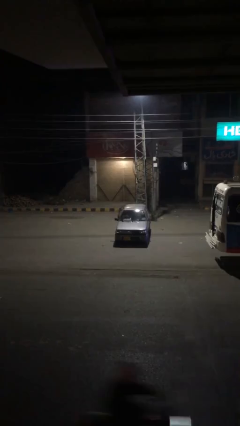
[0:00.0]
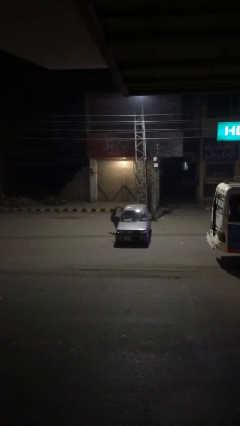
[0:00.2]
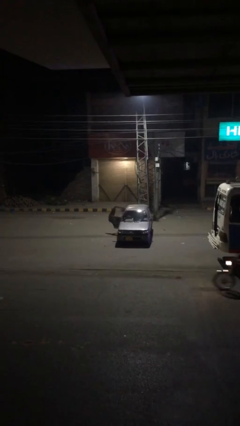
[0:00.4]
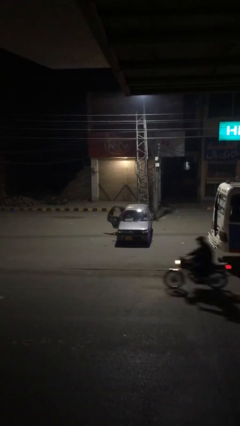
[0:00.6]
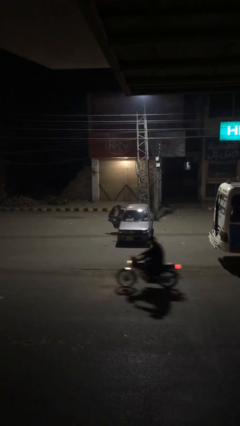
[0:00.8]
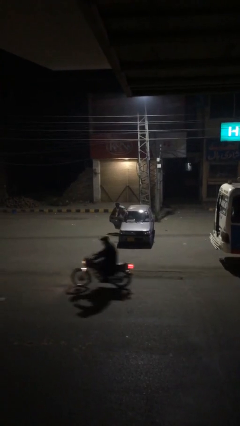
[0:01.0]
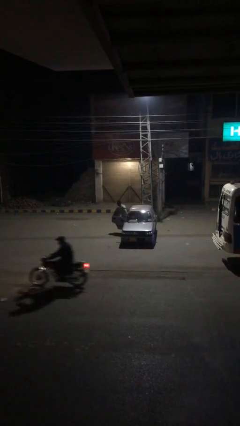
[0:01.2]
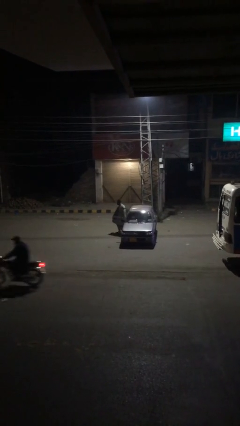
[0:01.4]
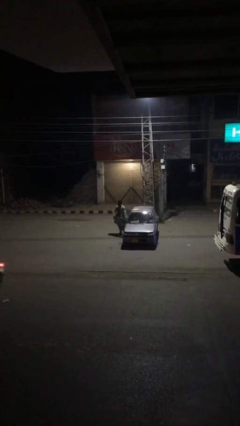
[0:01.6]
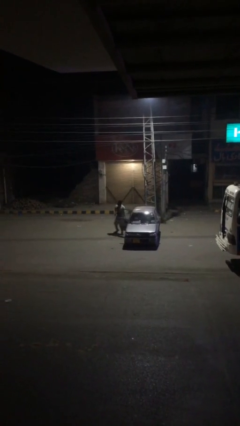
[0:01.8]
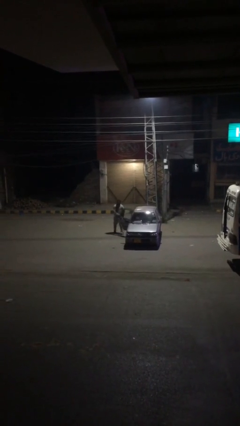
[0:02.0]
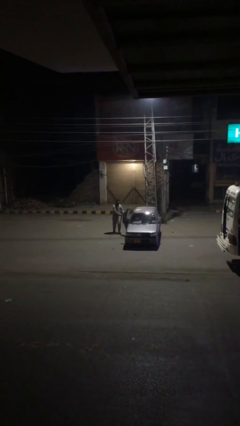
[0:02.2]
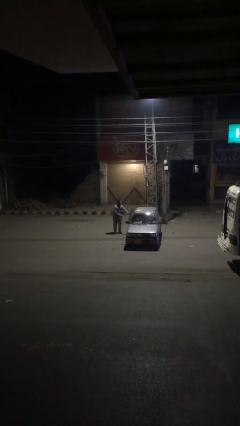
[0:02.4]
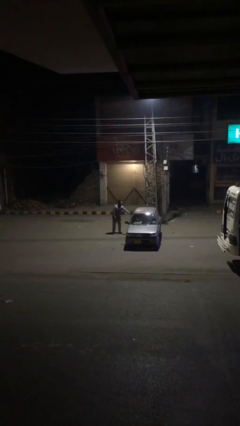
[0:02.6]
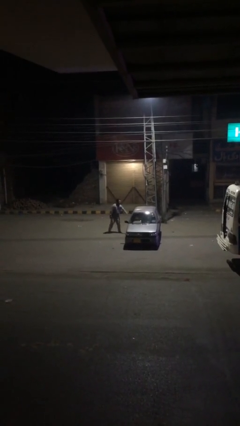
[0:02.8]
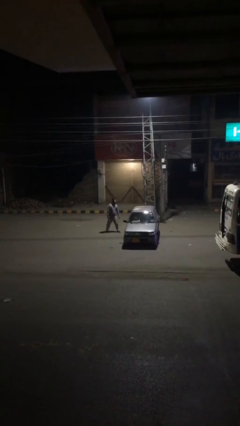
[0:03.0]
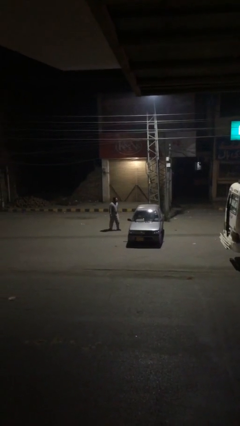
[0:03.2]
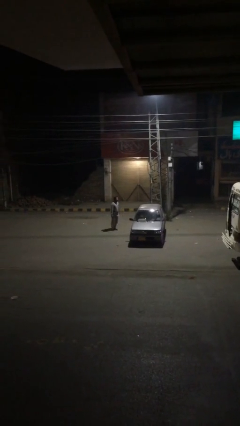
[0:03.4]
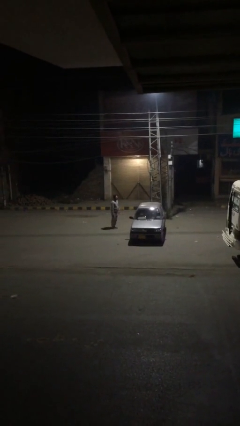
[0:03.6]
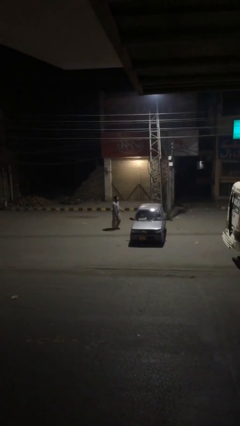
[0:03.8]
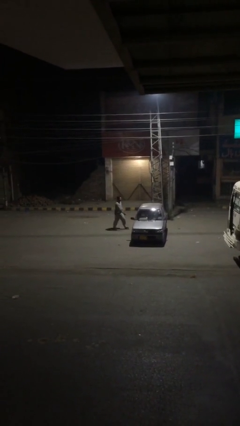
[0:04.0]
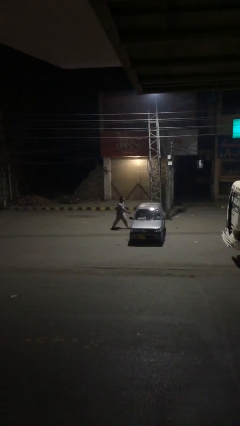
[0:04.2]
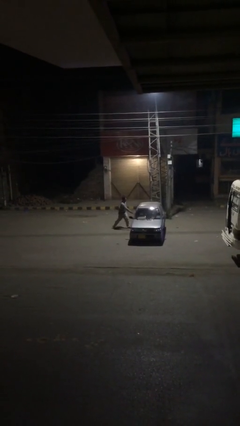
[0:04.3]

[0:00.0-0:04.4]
car drops off person

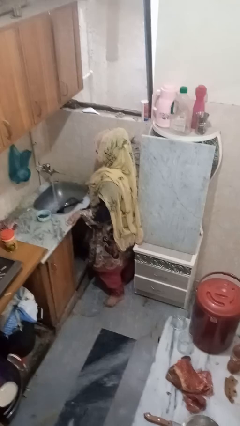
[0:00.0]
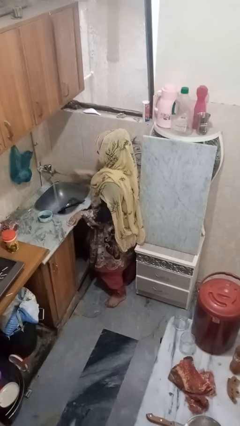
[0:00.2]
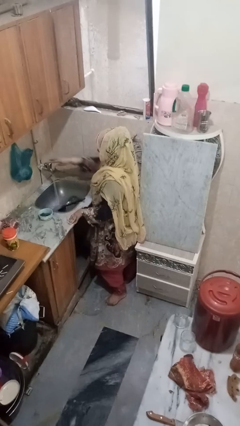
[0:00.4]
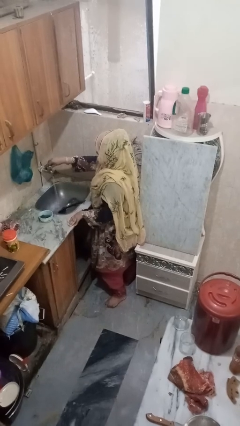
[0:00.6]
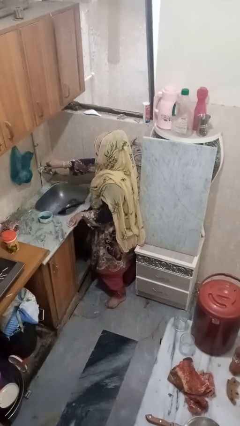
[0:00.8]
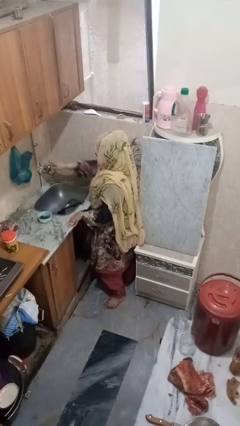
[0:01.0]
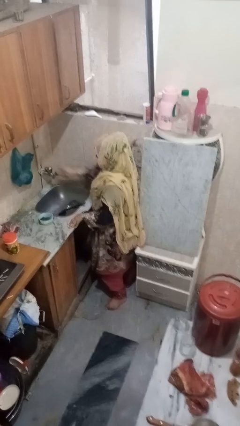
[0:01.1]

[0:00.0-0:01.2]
person turns off faucet

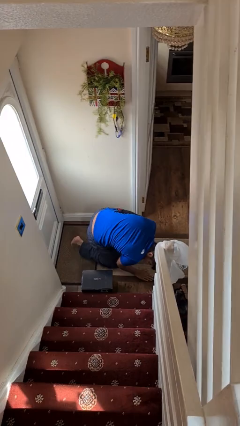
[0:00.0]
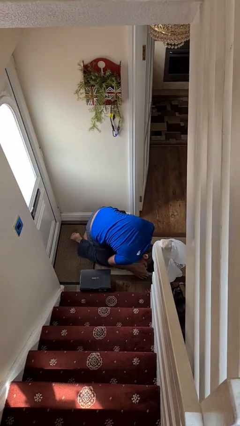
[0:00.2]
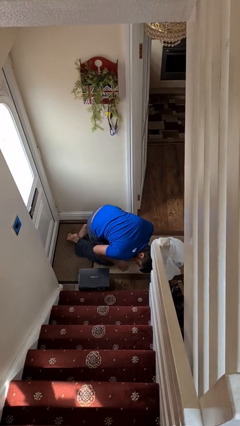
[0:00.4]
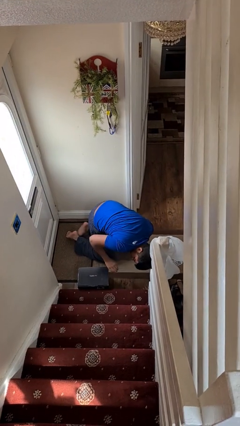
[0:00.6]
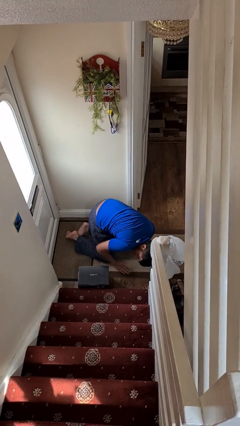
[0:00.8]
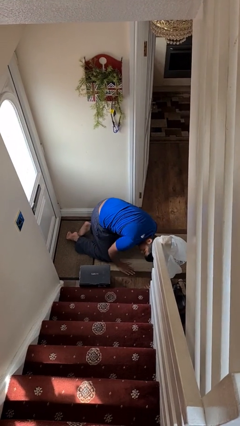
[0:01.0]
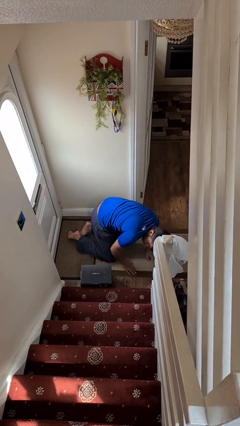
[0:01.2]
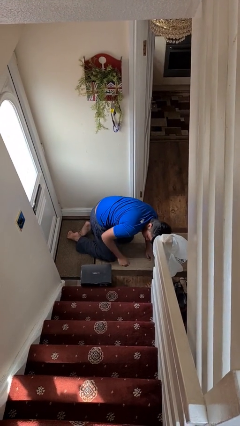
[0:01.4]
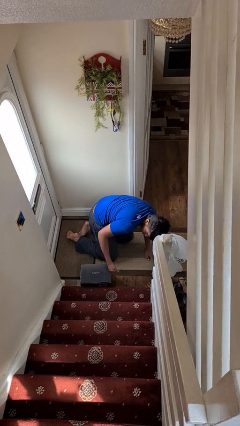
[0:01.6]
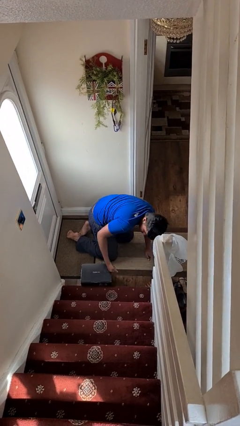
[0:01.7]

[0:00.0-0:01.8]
person lies down on floor

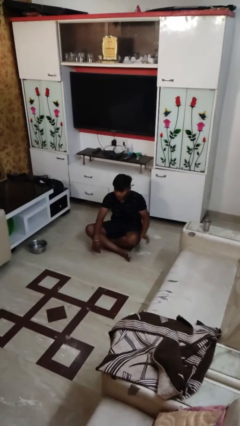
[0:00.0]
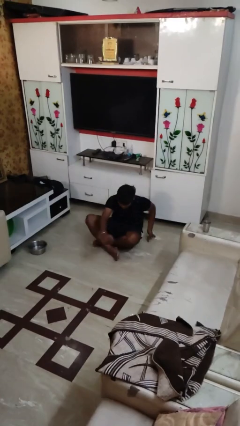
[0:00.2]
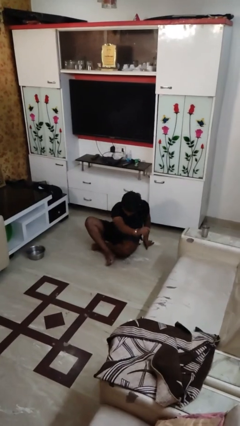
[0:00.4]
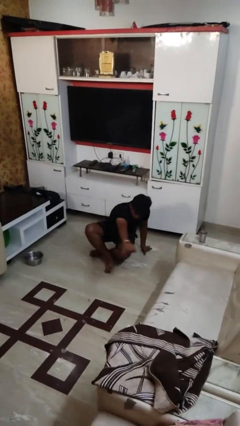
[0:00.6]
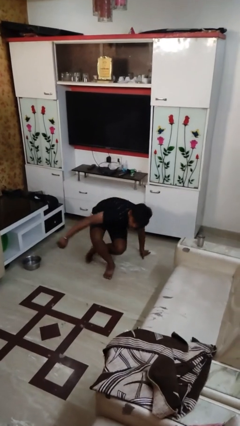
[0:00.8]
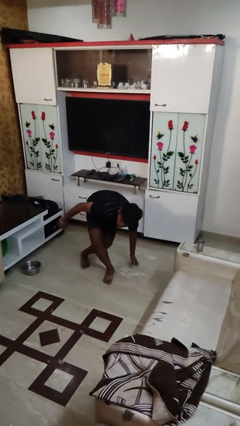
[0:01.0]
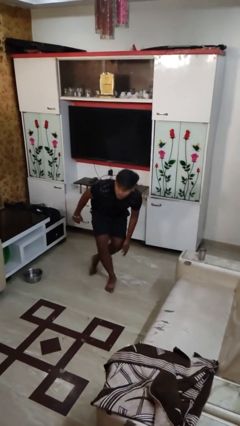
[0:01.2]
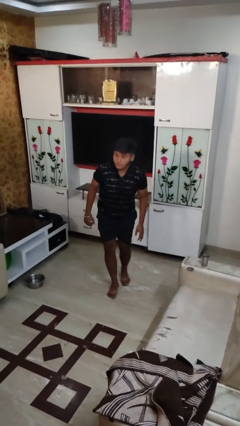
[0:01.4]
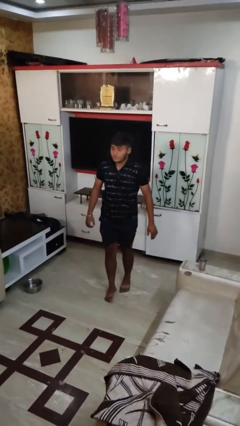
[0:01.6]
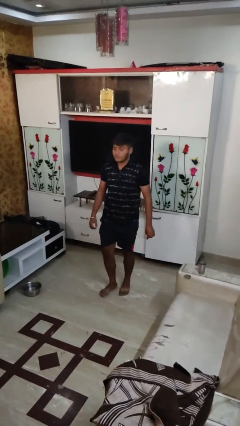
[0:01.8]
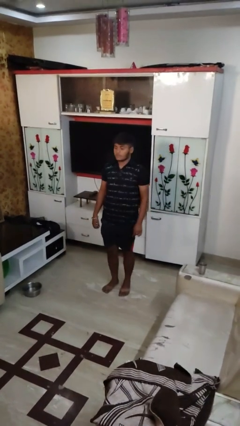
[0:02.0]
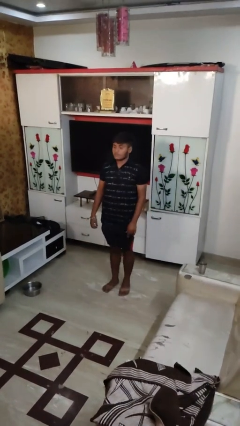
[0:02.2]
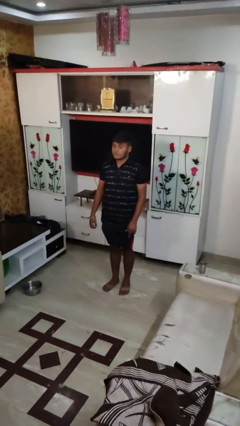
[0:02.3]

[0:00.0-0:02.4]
person stands up from floor

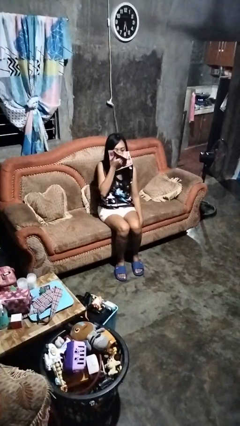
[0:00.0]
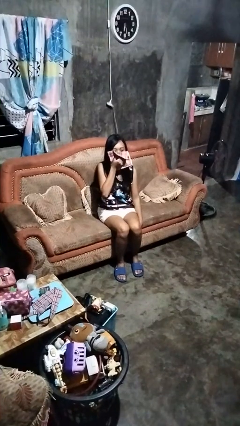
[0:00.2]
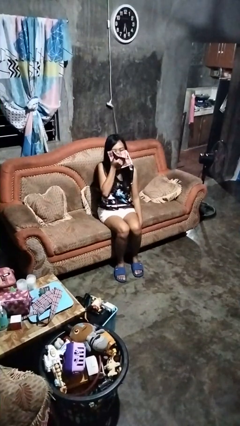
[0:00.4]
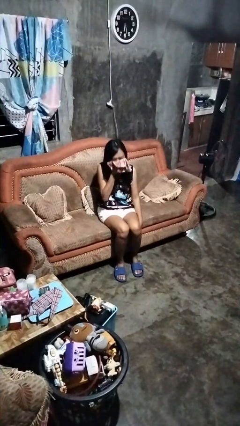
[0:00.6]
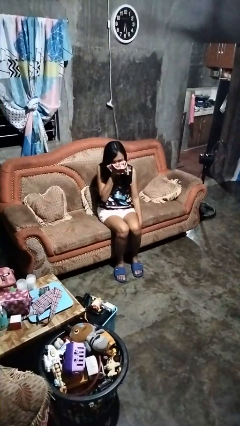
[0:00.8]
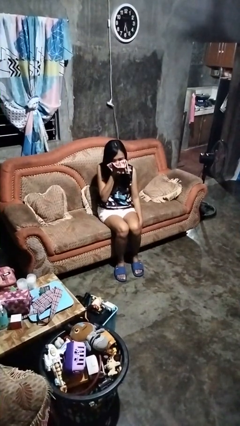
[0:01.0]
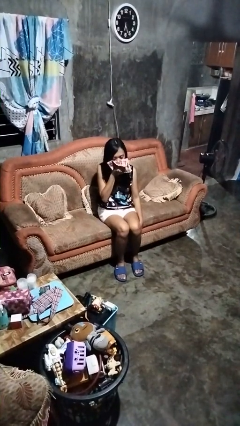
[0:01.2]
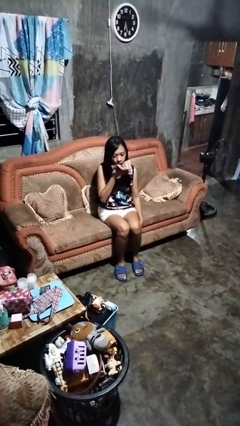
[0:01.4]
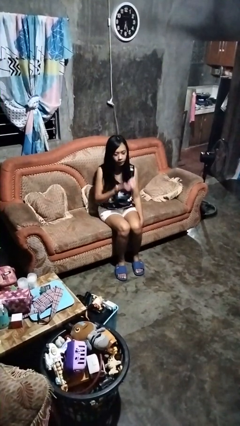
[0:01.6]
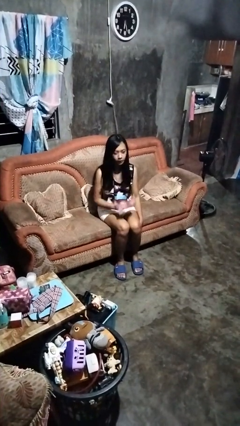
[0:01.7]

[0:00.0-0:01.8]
person blows nose

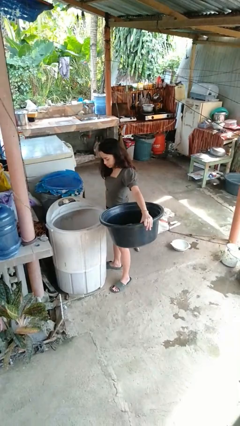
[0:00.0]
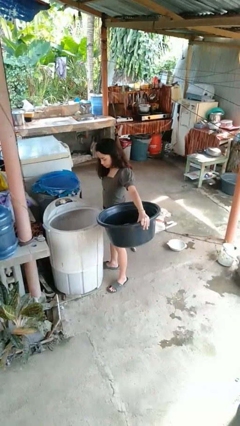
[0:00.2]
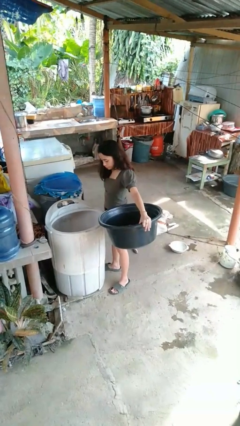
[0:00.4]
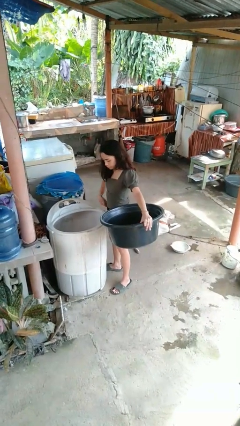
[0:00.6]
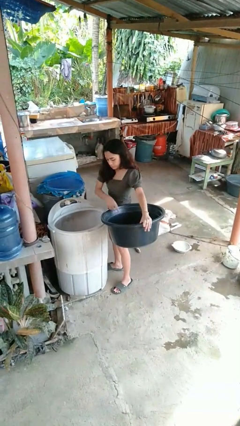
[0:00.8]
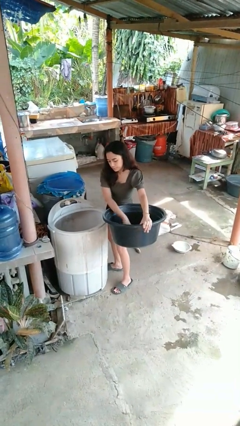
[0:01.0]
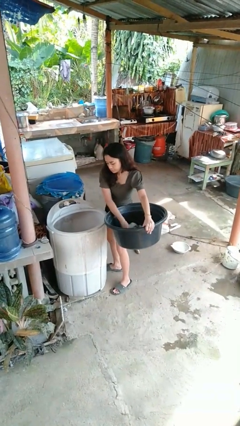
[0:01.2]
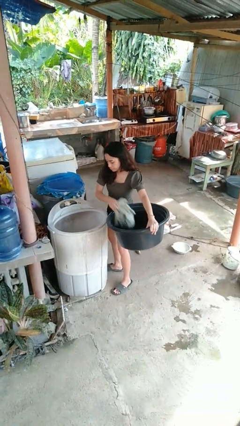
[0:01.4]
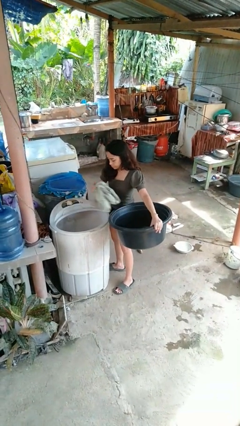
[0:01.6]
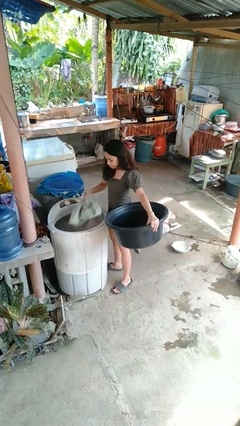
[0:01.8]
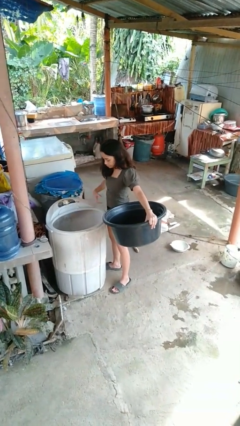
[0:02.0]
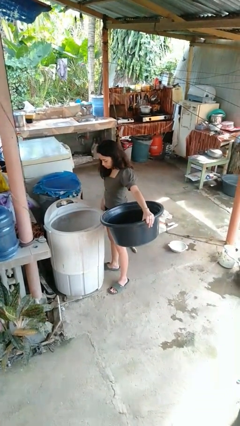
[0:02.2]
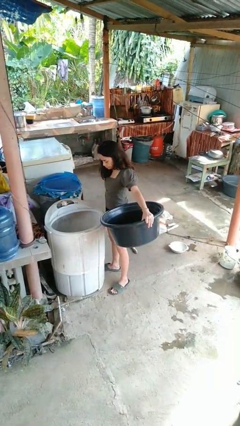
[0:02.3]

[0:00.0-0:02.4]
person loads clotheswasher

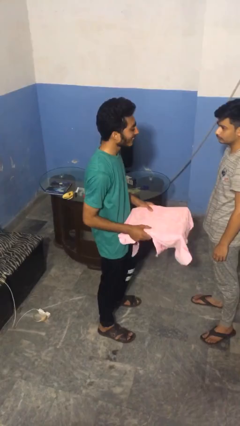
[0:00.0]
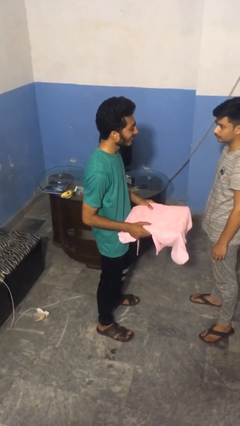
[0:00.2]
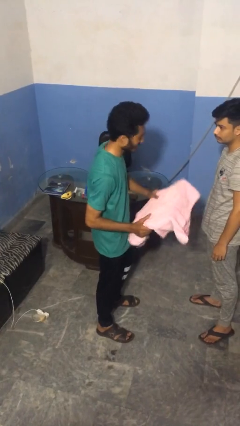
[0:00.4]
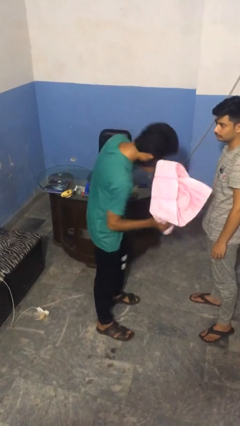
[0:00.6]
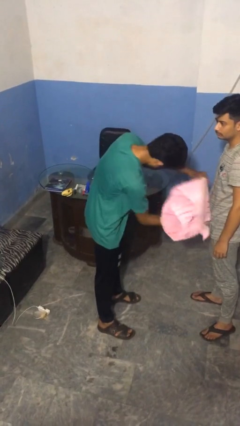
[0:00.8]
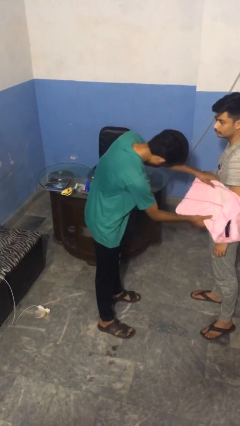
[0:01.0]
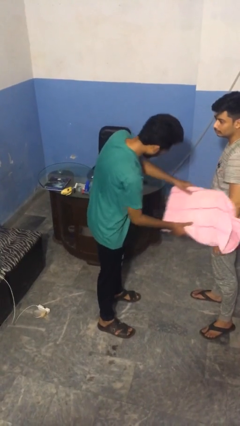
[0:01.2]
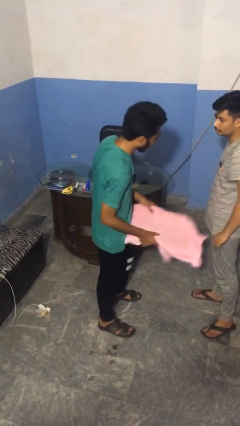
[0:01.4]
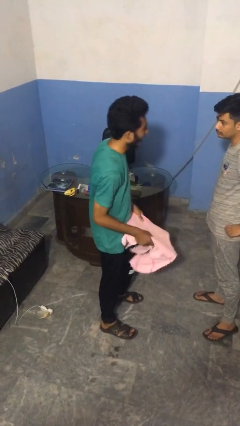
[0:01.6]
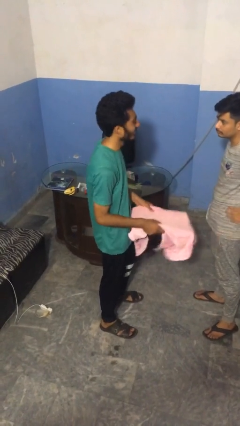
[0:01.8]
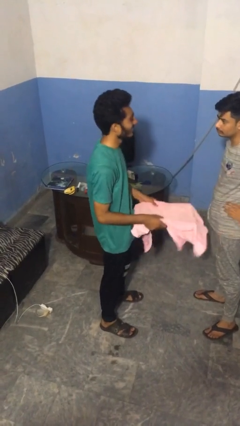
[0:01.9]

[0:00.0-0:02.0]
person hits person with pillow

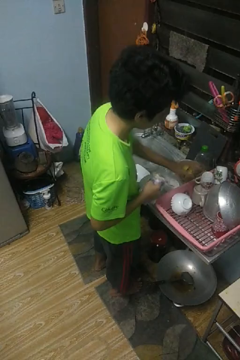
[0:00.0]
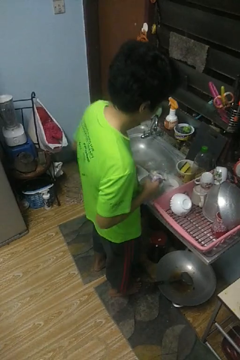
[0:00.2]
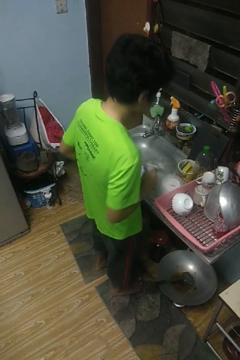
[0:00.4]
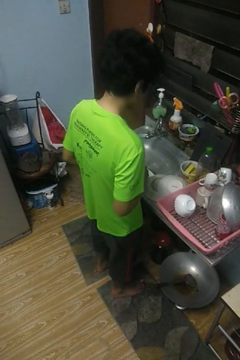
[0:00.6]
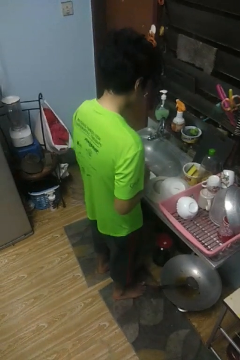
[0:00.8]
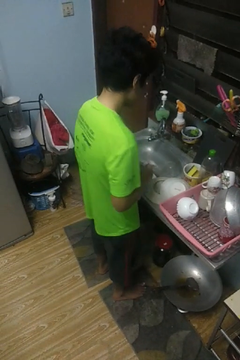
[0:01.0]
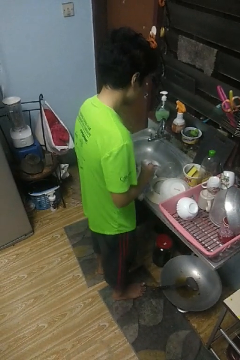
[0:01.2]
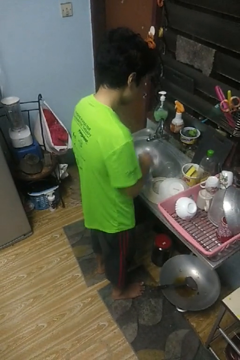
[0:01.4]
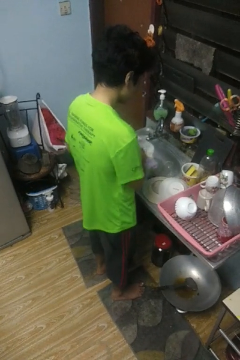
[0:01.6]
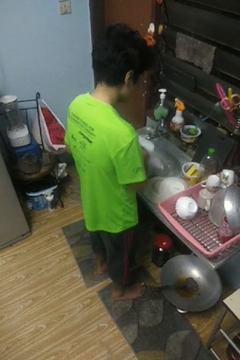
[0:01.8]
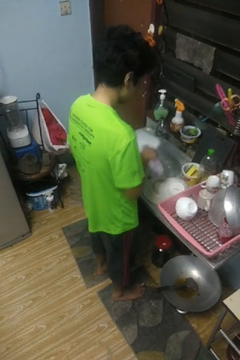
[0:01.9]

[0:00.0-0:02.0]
person dries dish
